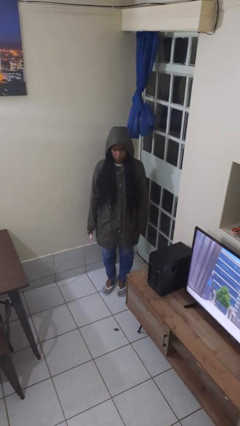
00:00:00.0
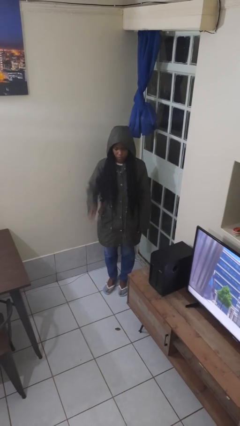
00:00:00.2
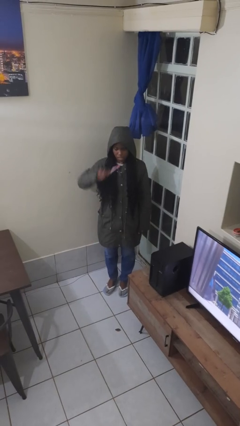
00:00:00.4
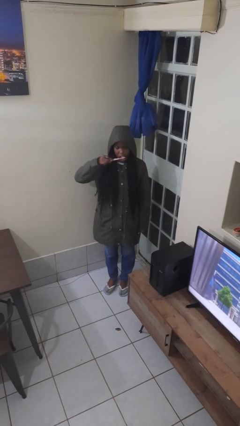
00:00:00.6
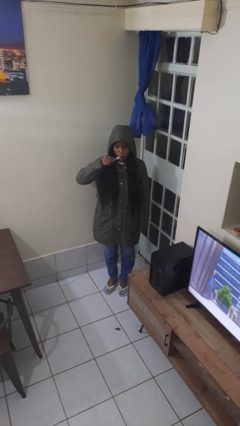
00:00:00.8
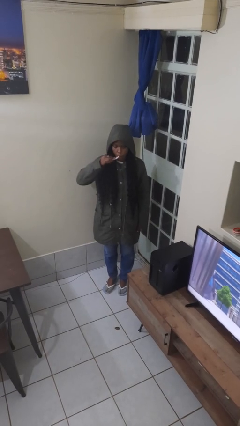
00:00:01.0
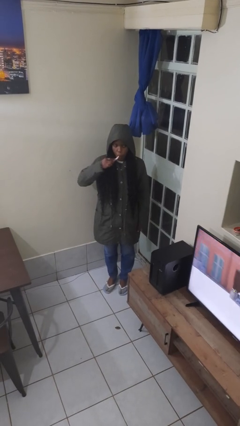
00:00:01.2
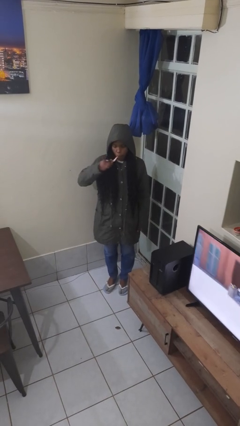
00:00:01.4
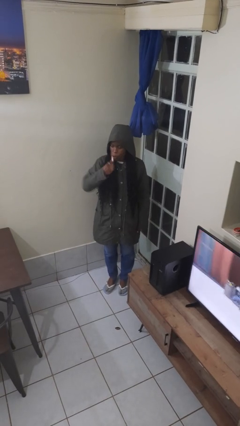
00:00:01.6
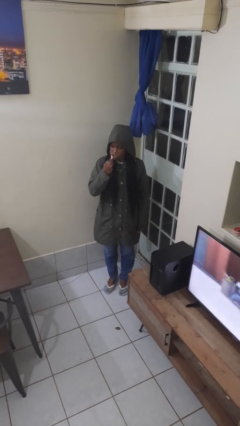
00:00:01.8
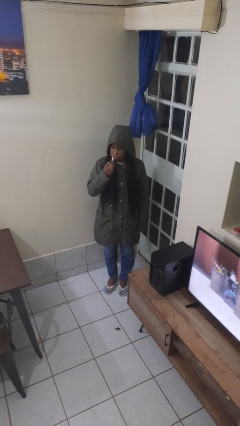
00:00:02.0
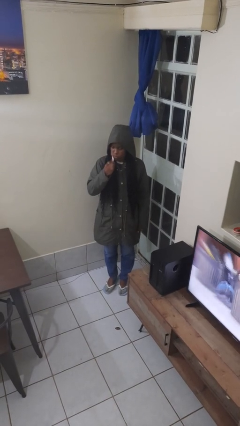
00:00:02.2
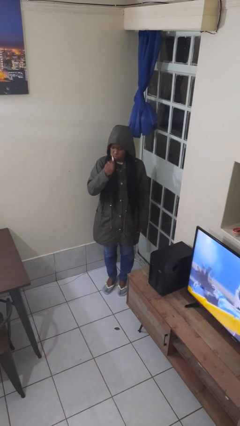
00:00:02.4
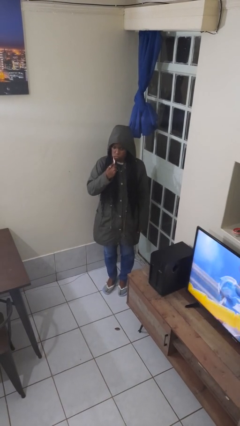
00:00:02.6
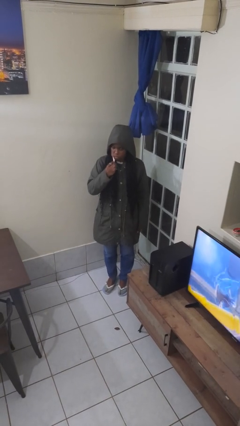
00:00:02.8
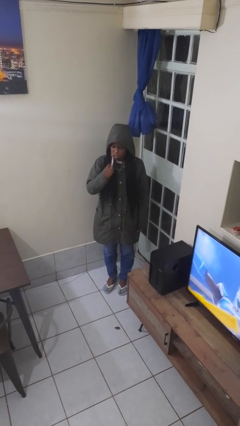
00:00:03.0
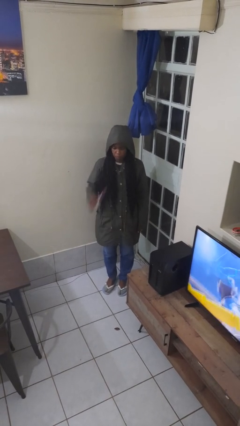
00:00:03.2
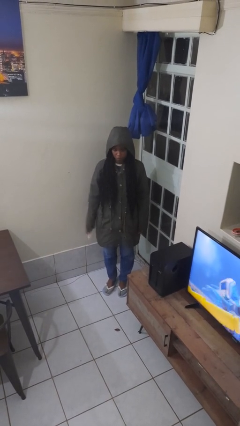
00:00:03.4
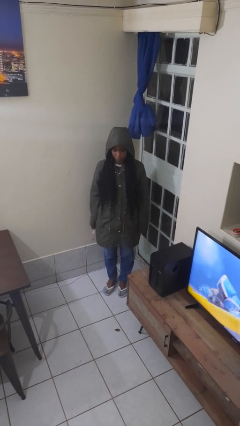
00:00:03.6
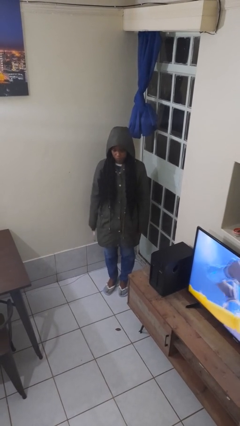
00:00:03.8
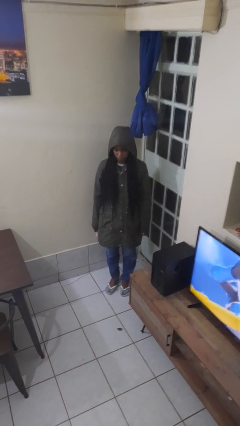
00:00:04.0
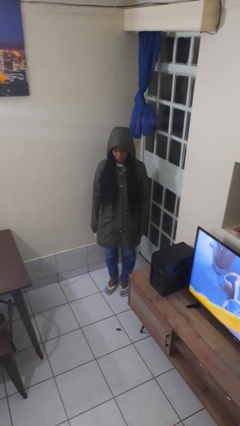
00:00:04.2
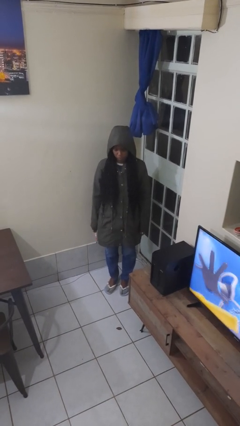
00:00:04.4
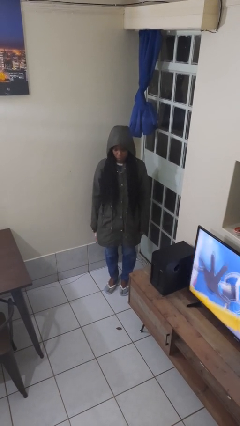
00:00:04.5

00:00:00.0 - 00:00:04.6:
person brushes teeth

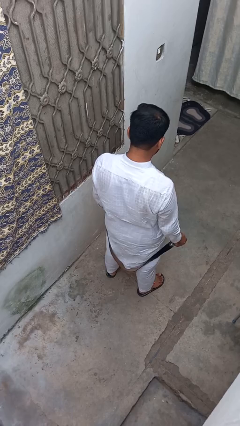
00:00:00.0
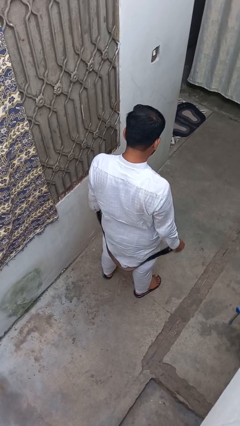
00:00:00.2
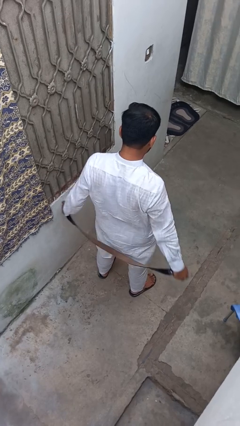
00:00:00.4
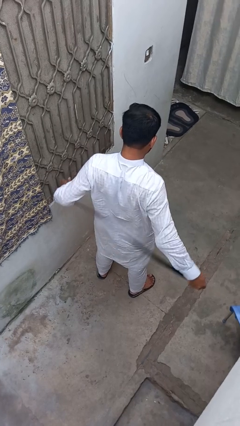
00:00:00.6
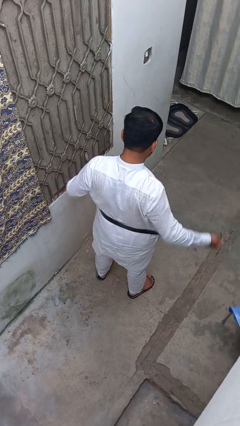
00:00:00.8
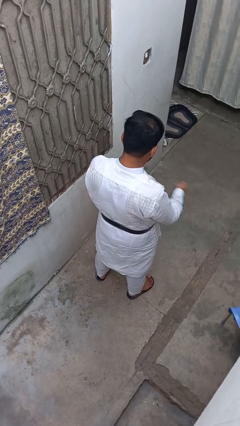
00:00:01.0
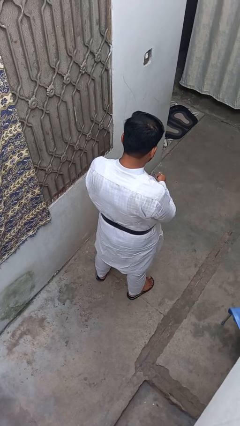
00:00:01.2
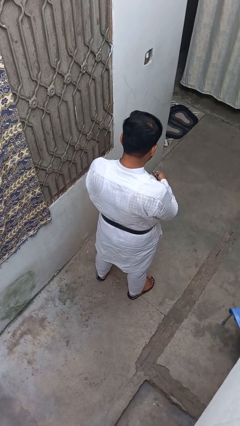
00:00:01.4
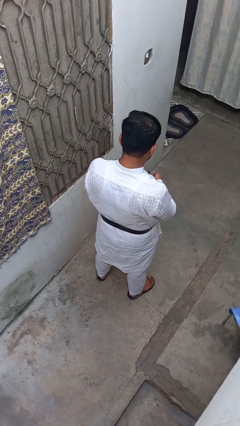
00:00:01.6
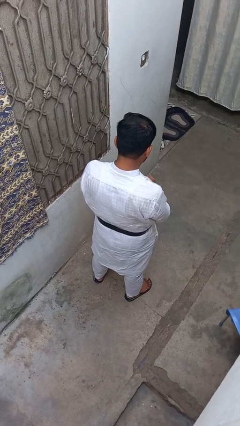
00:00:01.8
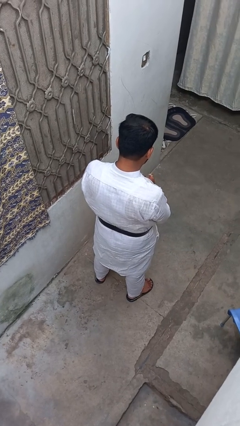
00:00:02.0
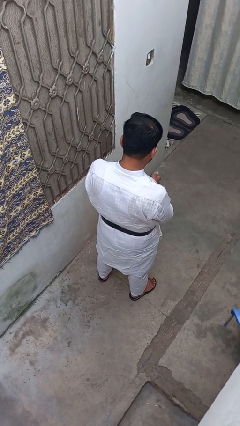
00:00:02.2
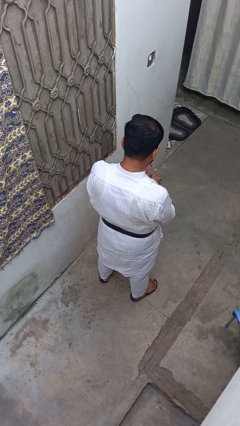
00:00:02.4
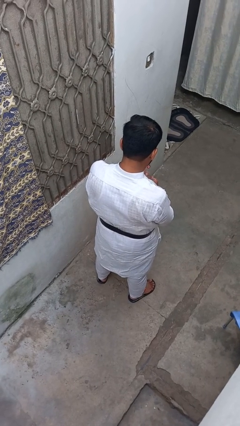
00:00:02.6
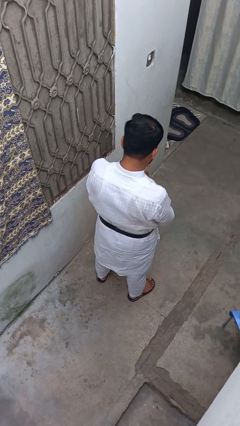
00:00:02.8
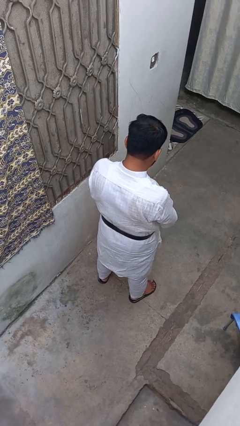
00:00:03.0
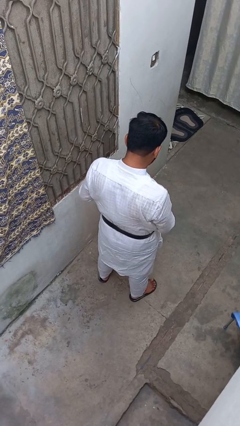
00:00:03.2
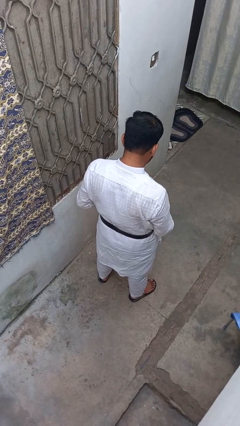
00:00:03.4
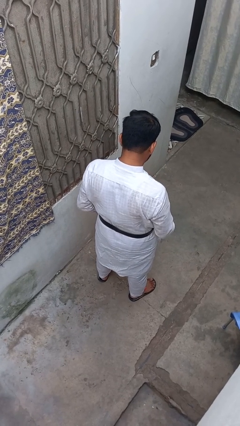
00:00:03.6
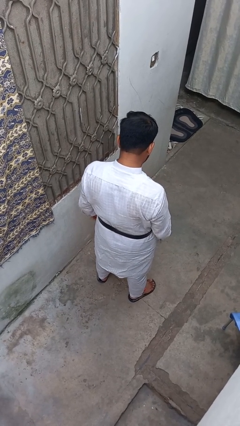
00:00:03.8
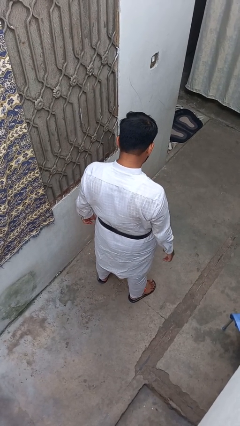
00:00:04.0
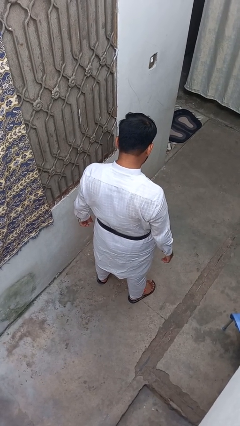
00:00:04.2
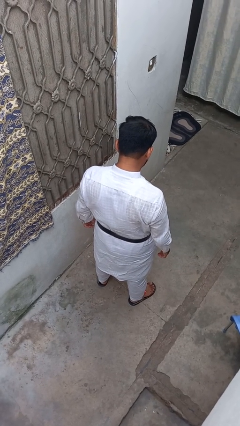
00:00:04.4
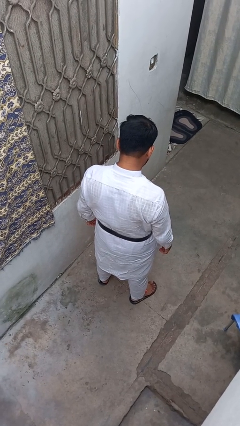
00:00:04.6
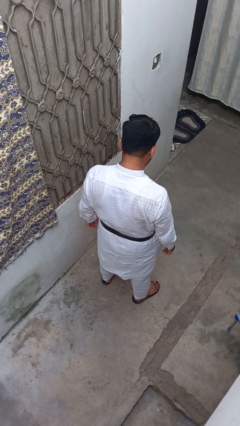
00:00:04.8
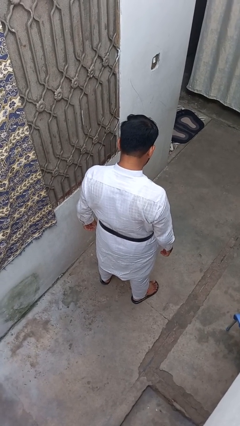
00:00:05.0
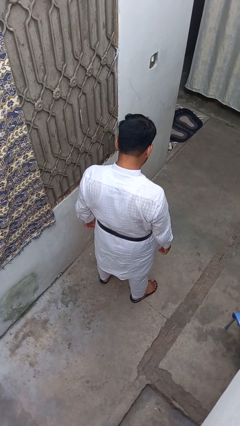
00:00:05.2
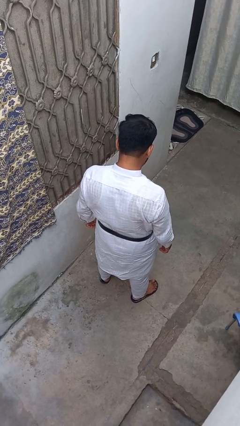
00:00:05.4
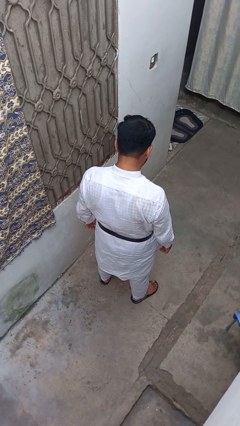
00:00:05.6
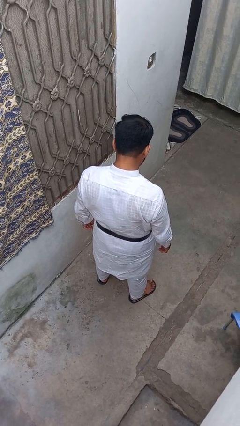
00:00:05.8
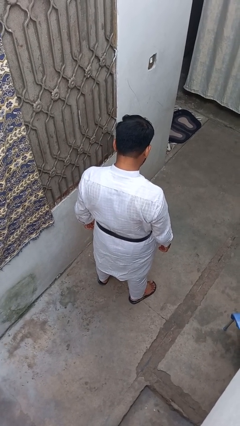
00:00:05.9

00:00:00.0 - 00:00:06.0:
person puts on belt

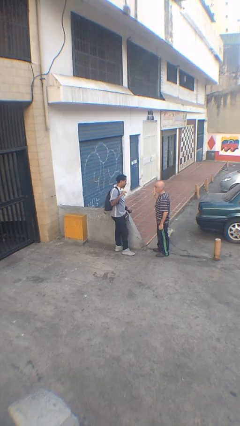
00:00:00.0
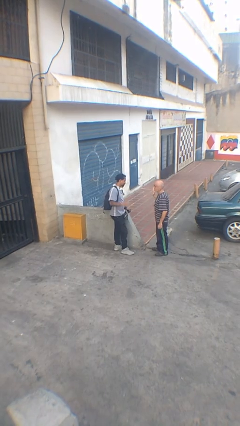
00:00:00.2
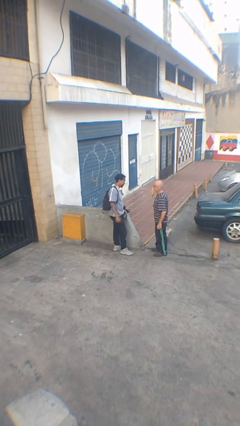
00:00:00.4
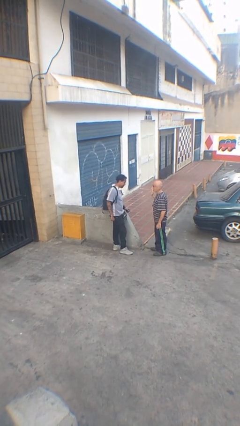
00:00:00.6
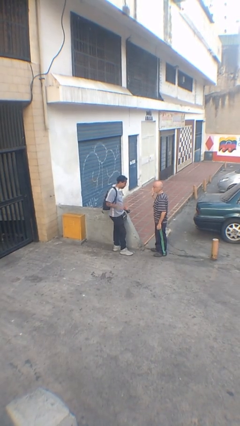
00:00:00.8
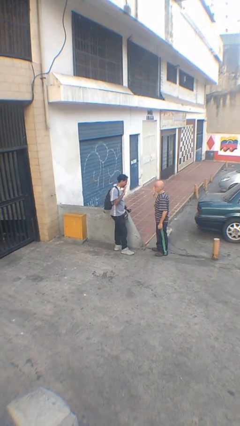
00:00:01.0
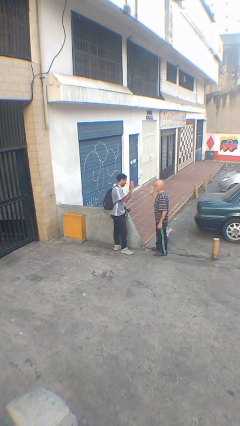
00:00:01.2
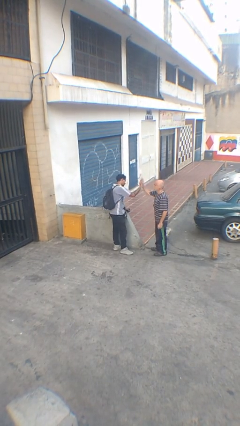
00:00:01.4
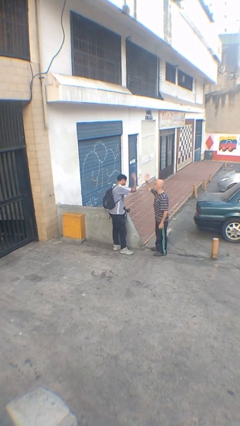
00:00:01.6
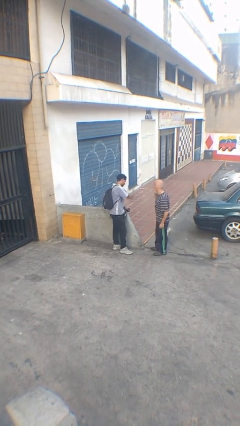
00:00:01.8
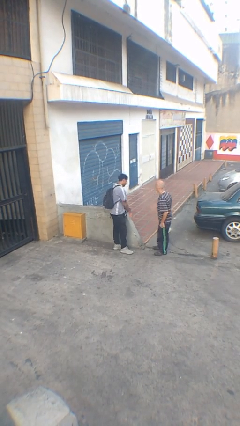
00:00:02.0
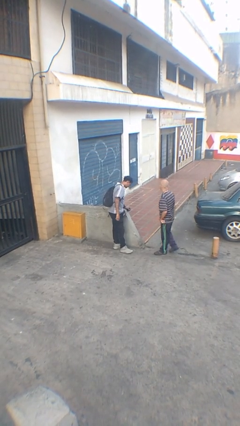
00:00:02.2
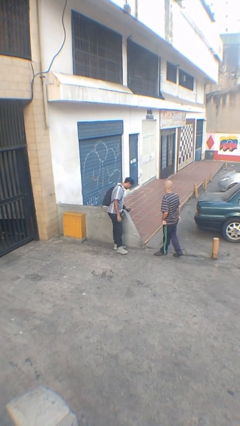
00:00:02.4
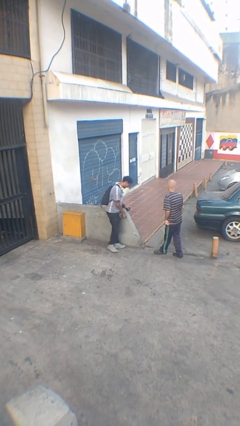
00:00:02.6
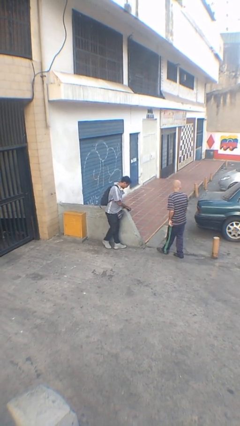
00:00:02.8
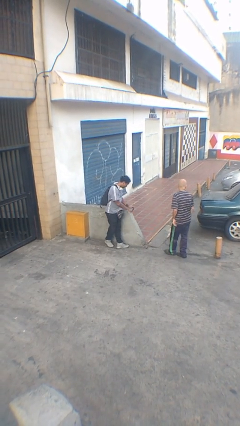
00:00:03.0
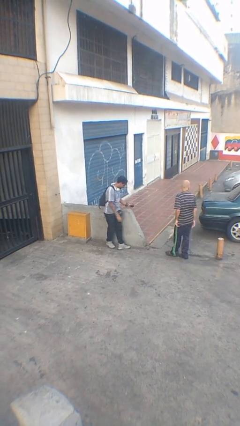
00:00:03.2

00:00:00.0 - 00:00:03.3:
person highfives hand

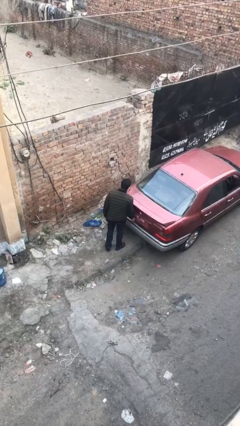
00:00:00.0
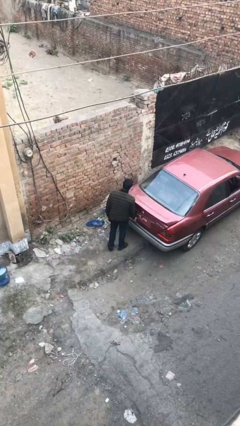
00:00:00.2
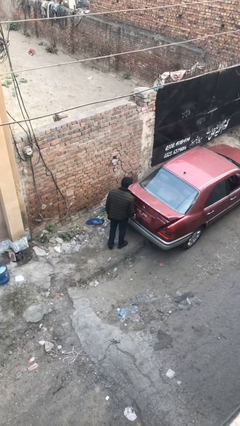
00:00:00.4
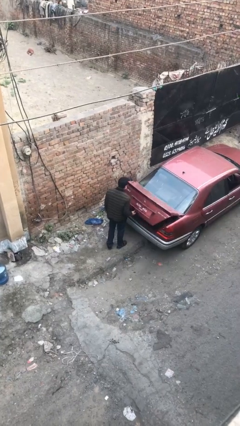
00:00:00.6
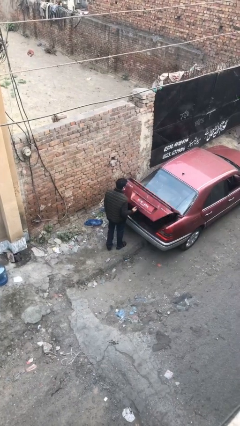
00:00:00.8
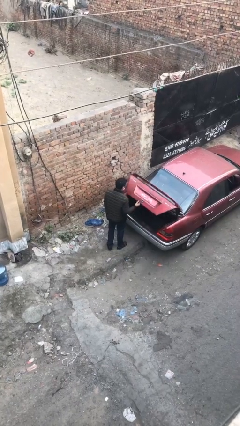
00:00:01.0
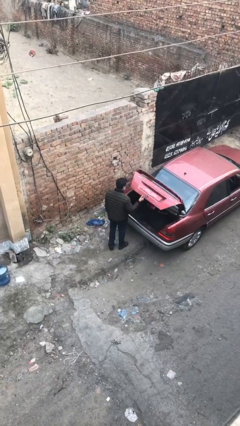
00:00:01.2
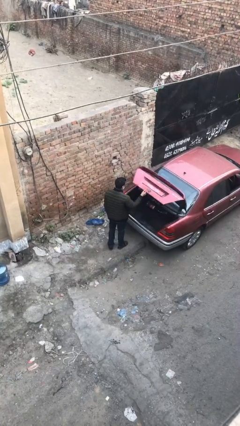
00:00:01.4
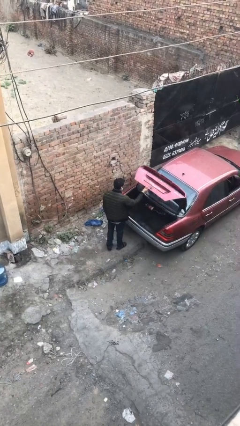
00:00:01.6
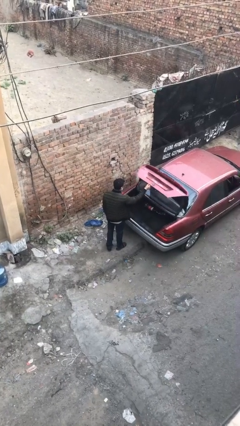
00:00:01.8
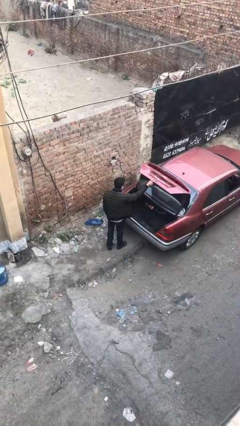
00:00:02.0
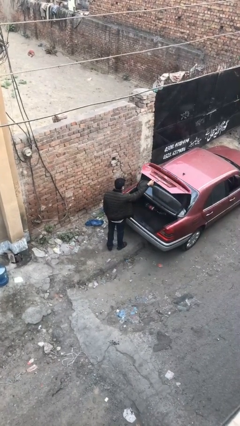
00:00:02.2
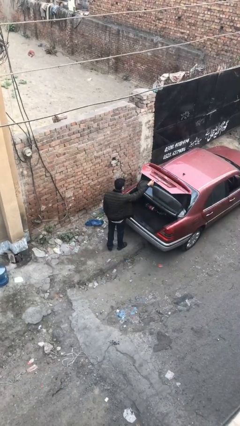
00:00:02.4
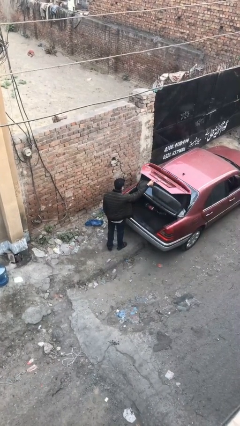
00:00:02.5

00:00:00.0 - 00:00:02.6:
person opens car trunk

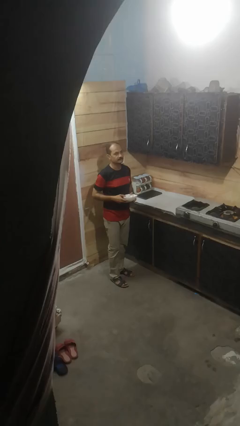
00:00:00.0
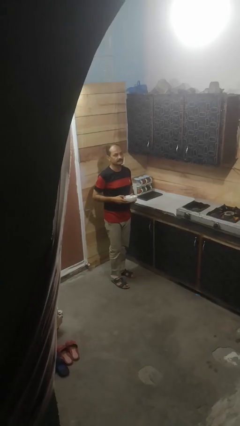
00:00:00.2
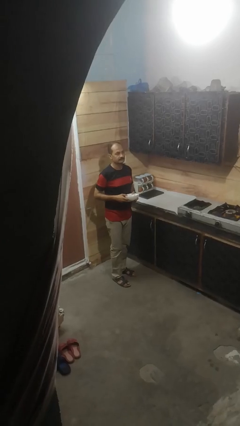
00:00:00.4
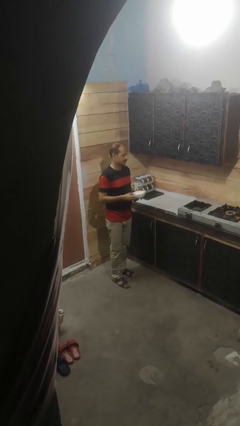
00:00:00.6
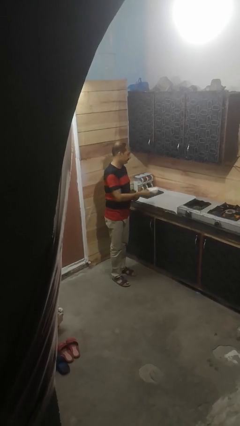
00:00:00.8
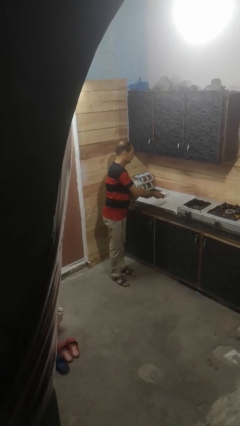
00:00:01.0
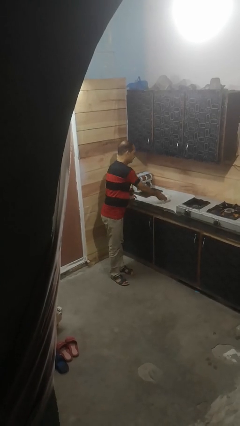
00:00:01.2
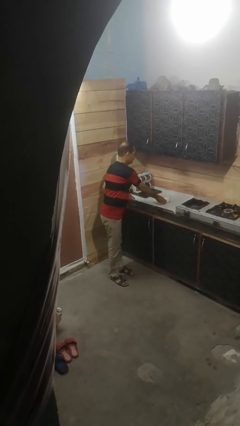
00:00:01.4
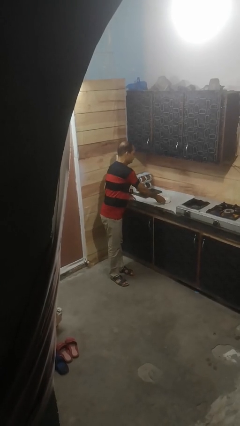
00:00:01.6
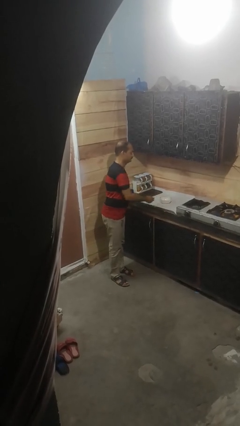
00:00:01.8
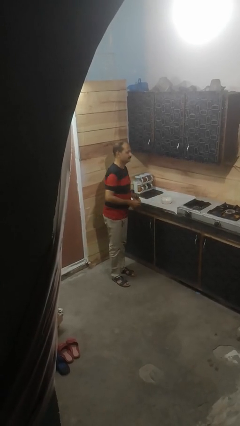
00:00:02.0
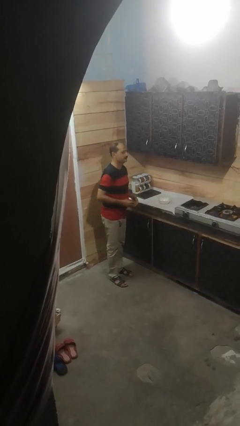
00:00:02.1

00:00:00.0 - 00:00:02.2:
person puts down object on countertop
